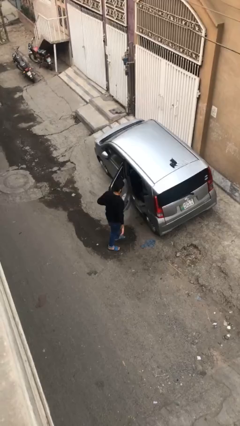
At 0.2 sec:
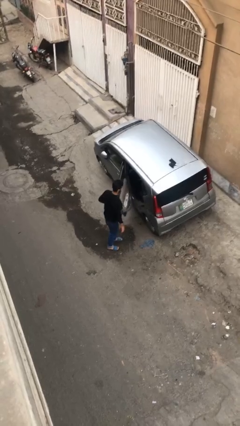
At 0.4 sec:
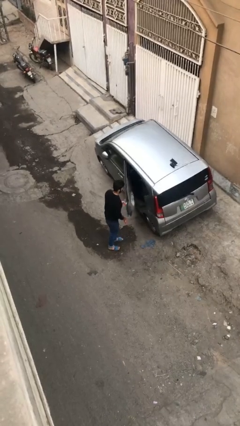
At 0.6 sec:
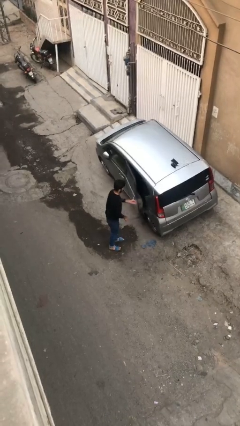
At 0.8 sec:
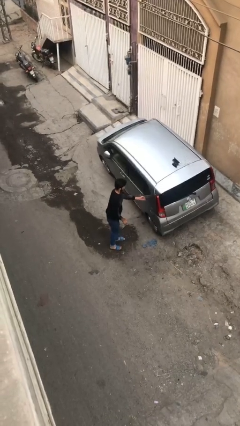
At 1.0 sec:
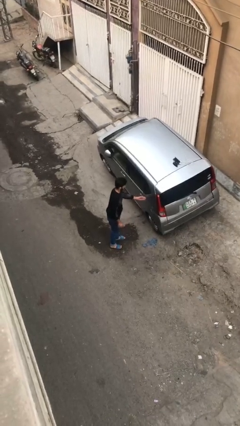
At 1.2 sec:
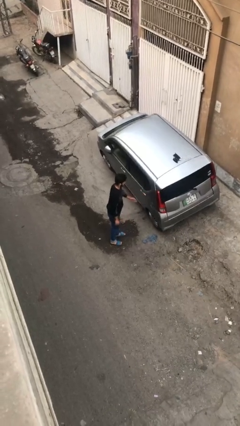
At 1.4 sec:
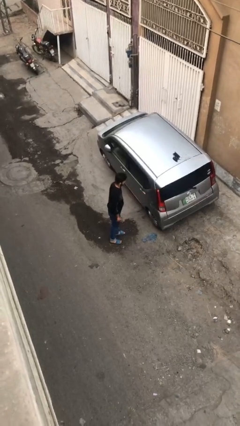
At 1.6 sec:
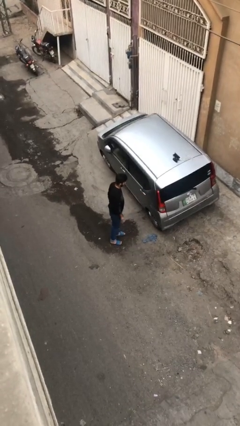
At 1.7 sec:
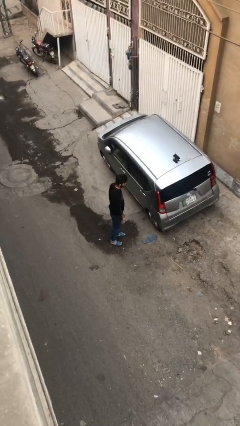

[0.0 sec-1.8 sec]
person closes car door

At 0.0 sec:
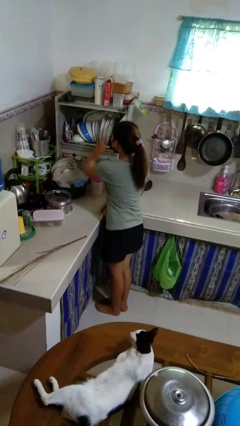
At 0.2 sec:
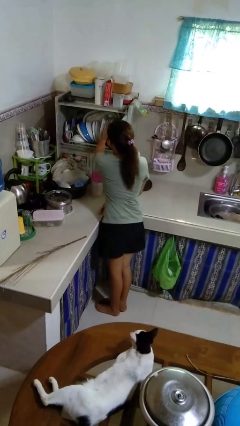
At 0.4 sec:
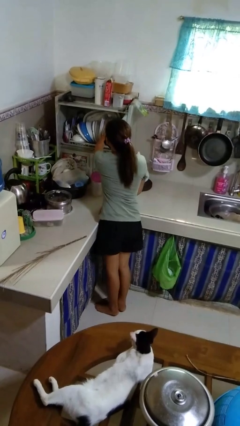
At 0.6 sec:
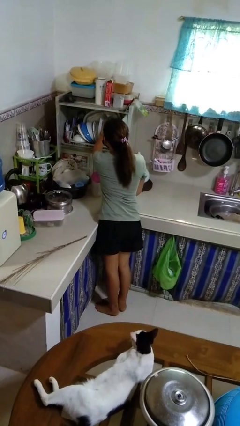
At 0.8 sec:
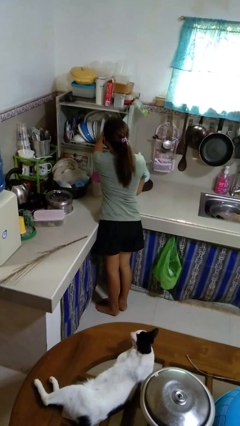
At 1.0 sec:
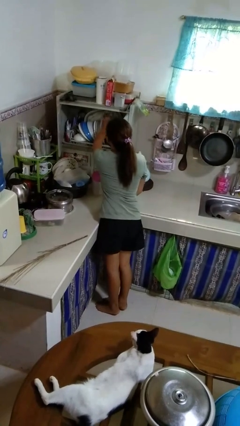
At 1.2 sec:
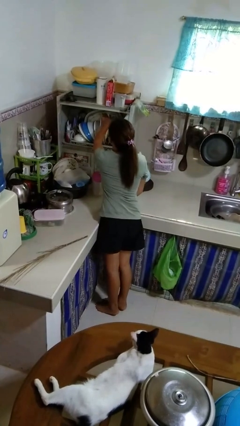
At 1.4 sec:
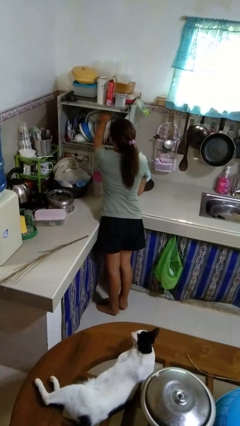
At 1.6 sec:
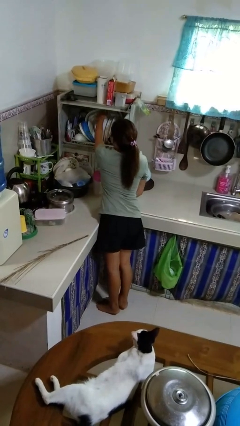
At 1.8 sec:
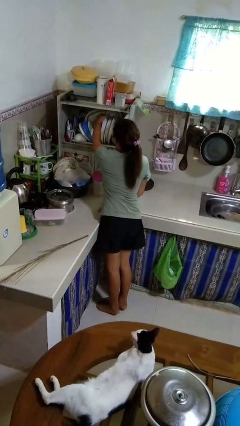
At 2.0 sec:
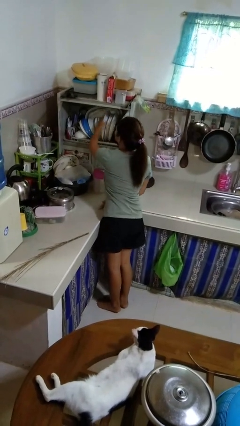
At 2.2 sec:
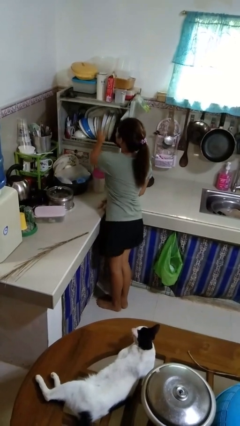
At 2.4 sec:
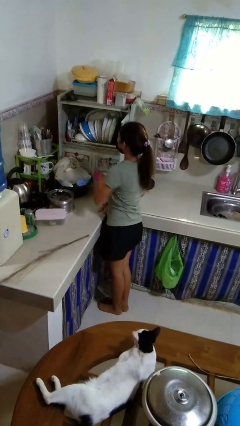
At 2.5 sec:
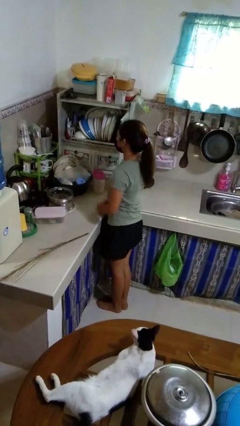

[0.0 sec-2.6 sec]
person searches in kitchen drawer

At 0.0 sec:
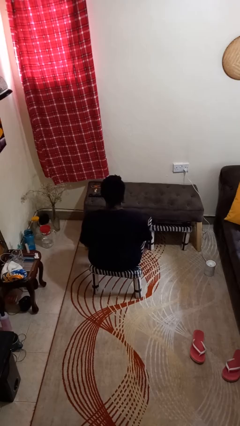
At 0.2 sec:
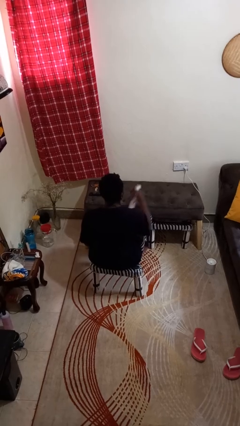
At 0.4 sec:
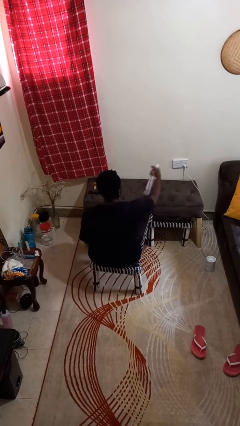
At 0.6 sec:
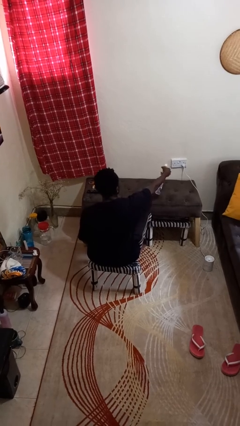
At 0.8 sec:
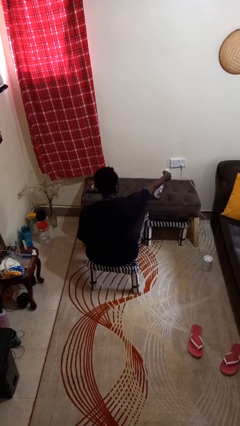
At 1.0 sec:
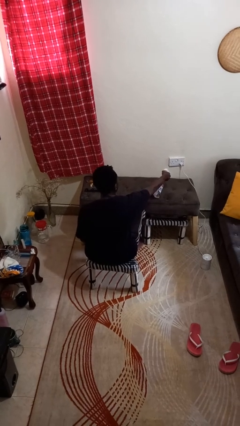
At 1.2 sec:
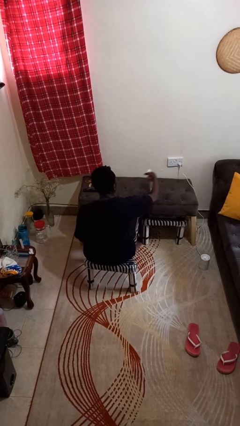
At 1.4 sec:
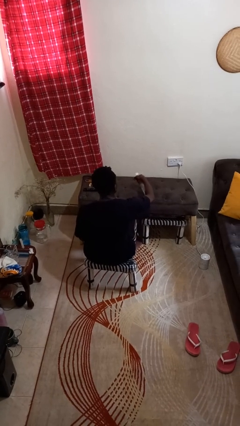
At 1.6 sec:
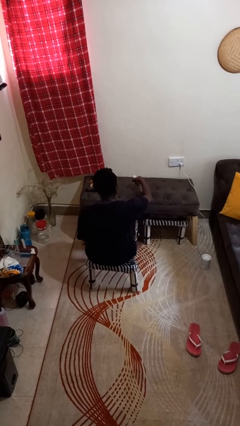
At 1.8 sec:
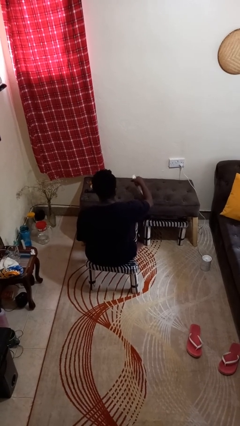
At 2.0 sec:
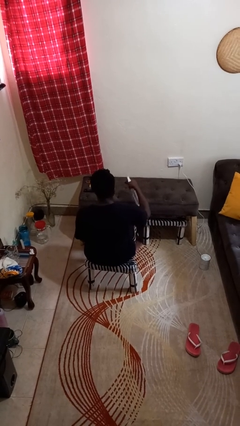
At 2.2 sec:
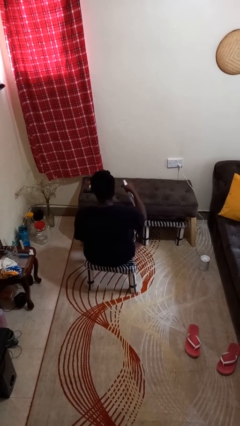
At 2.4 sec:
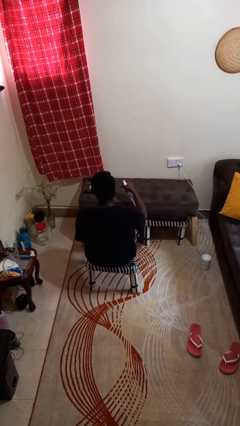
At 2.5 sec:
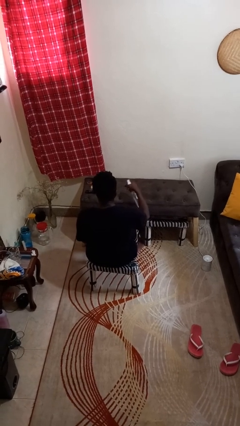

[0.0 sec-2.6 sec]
person sprays from bottle

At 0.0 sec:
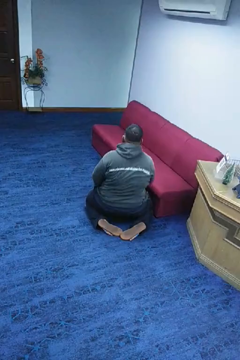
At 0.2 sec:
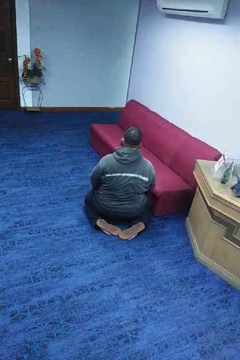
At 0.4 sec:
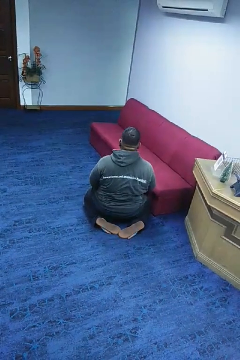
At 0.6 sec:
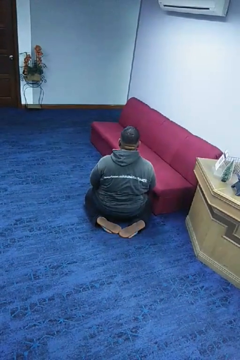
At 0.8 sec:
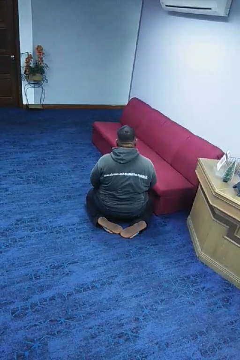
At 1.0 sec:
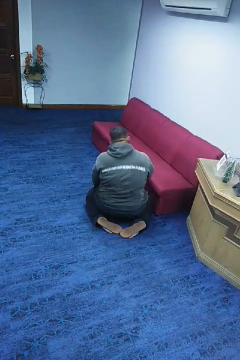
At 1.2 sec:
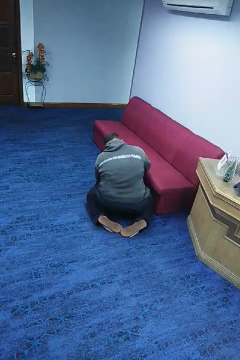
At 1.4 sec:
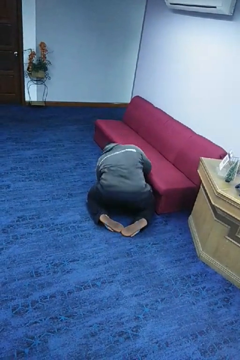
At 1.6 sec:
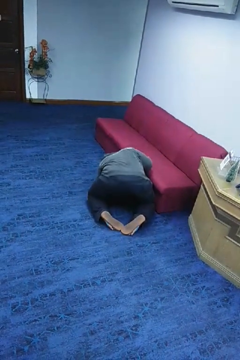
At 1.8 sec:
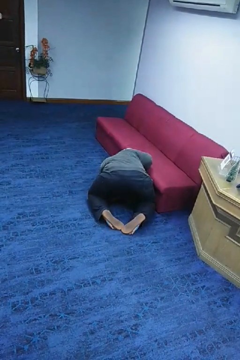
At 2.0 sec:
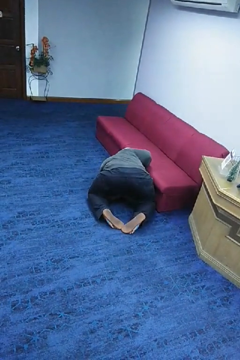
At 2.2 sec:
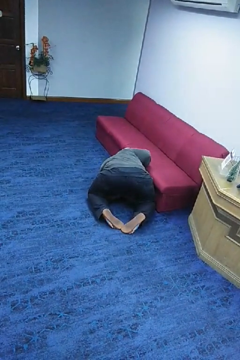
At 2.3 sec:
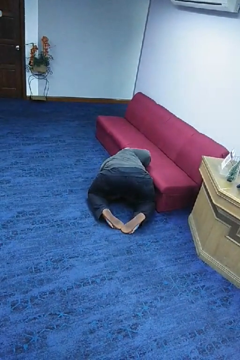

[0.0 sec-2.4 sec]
person searches under couch

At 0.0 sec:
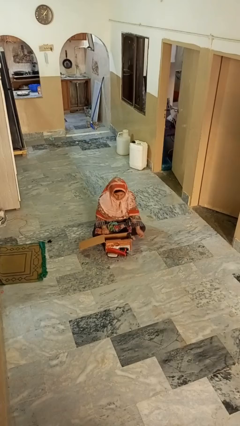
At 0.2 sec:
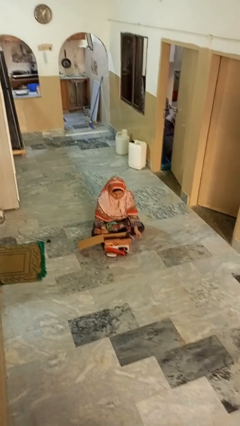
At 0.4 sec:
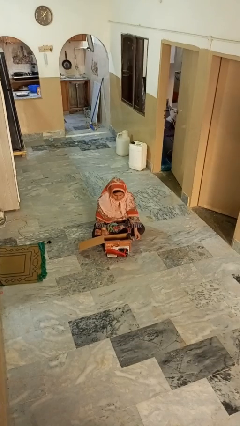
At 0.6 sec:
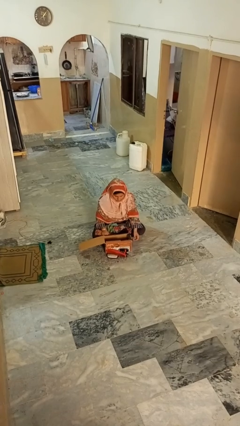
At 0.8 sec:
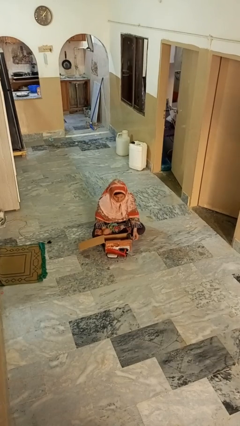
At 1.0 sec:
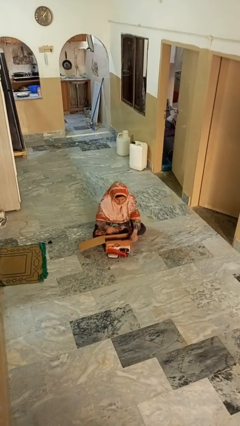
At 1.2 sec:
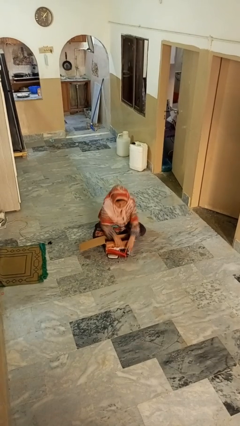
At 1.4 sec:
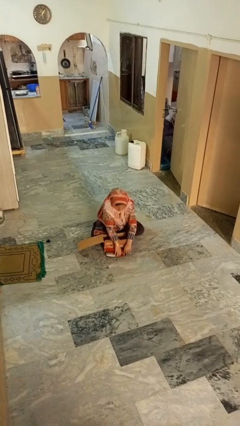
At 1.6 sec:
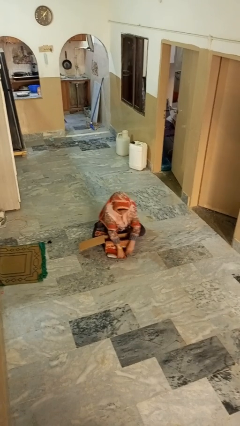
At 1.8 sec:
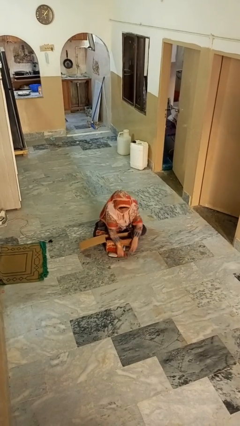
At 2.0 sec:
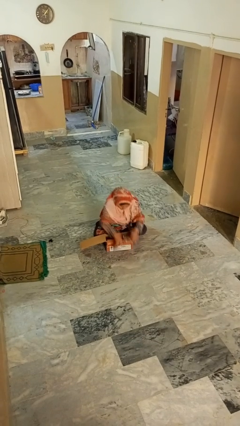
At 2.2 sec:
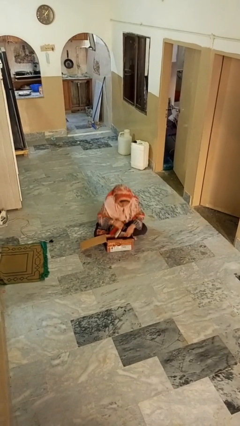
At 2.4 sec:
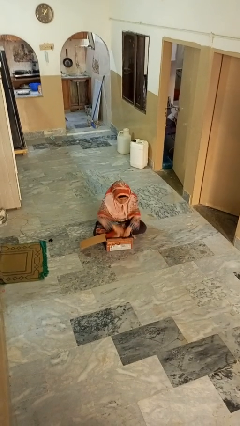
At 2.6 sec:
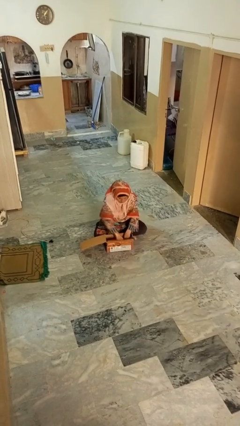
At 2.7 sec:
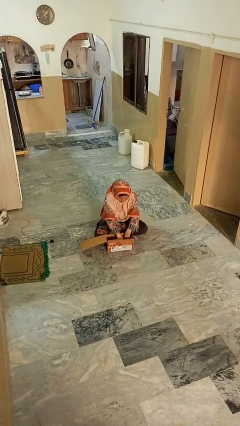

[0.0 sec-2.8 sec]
person puts object into box

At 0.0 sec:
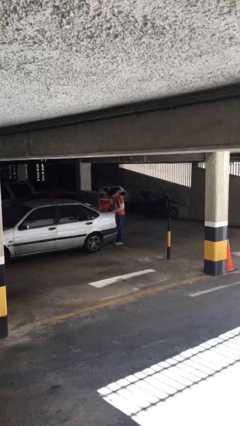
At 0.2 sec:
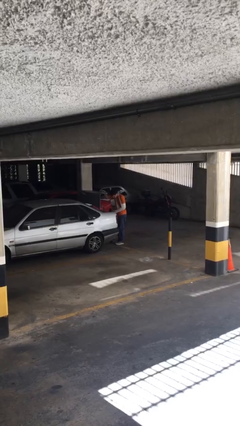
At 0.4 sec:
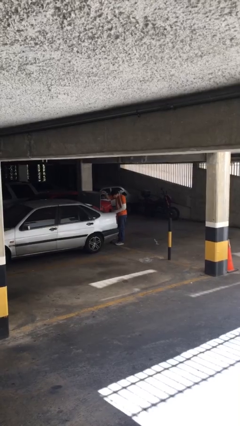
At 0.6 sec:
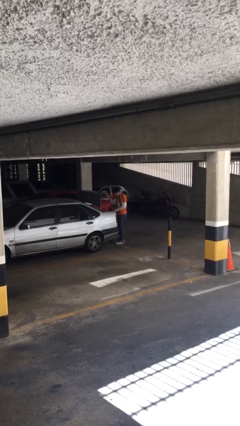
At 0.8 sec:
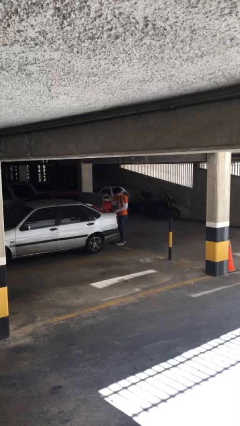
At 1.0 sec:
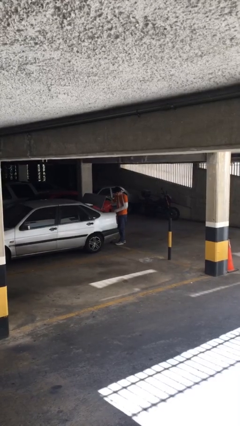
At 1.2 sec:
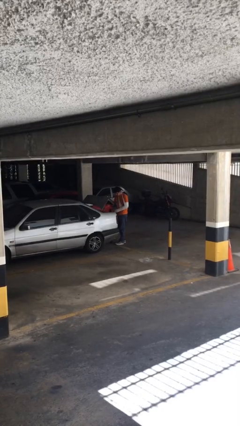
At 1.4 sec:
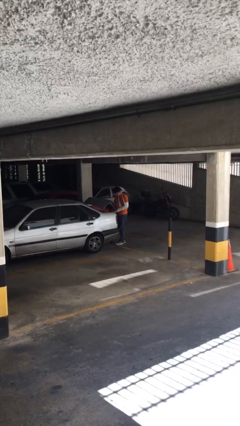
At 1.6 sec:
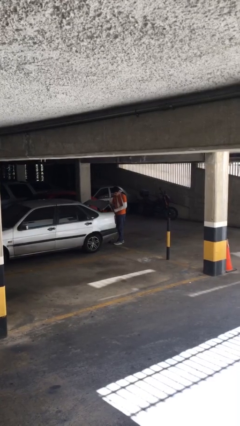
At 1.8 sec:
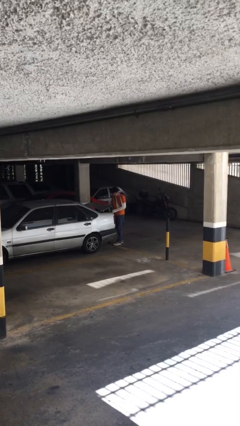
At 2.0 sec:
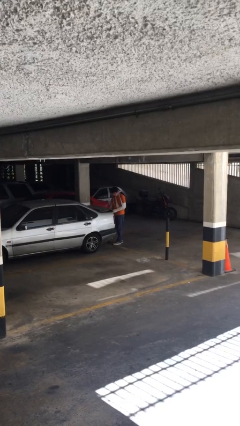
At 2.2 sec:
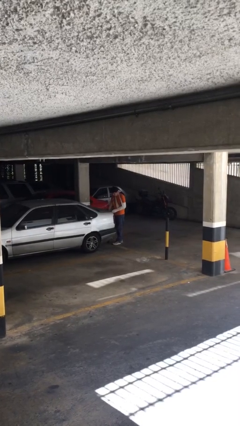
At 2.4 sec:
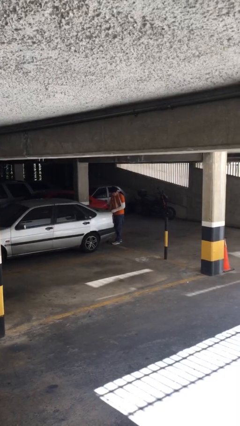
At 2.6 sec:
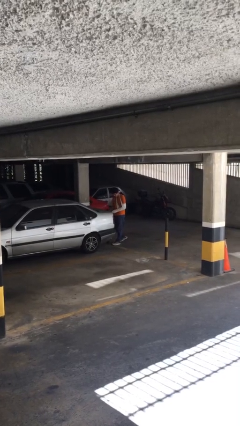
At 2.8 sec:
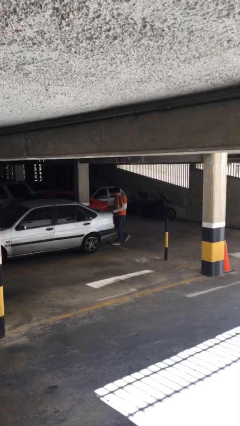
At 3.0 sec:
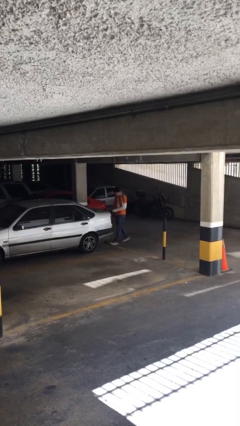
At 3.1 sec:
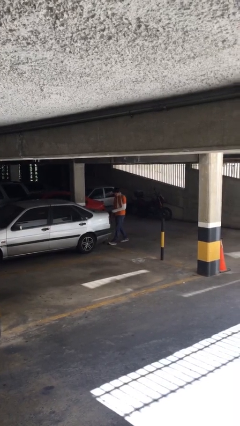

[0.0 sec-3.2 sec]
person closes car trunk

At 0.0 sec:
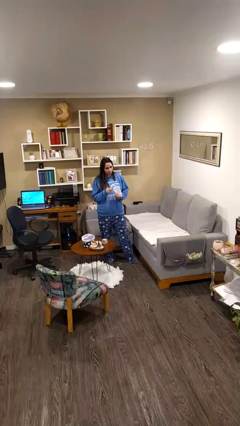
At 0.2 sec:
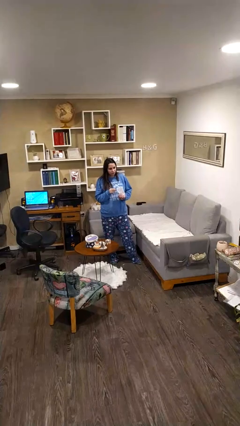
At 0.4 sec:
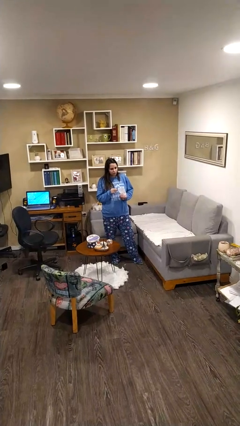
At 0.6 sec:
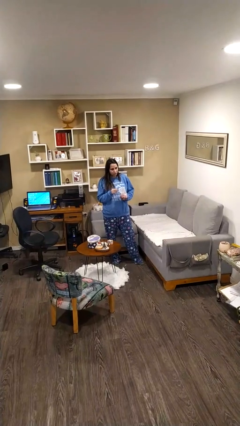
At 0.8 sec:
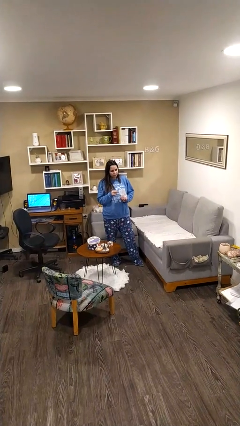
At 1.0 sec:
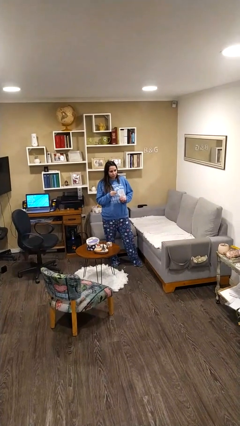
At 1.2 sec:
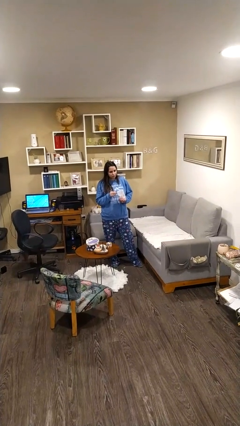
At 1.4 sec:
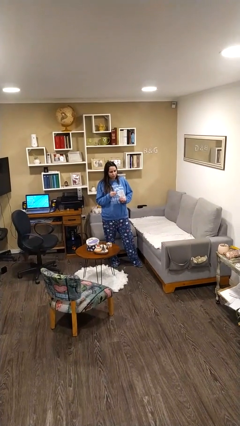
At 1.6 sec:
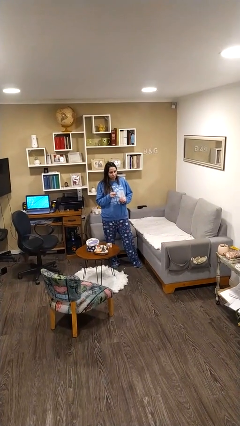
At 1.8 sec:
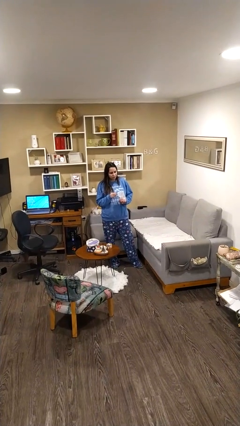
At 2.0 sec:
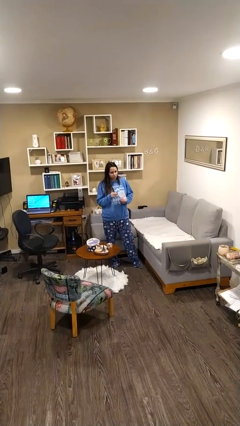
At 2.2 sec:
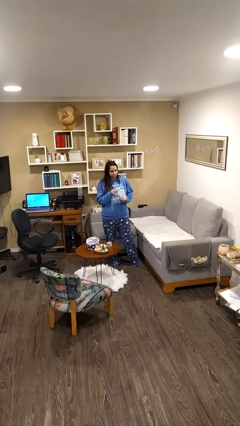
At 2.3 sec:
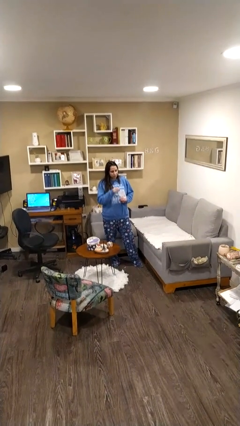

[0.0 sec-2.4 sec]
person eats snack from bag
